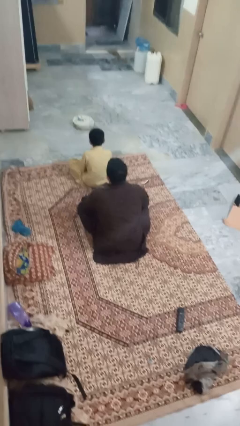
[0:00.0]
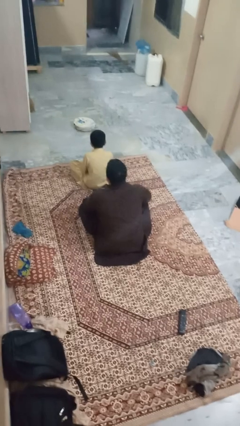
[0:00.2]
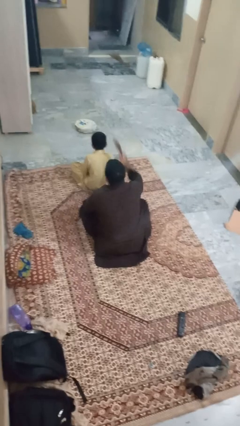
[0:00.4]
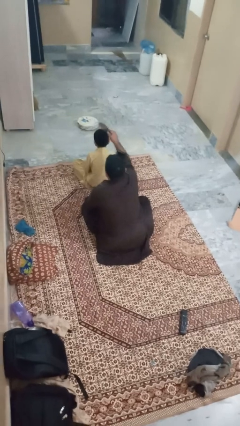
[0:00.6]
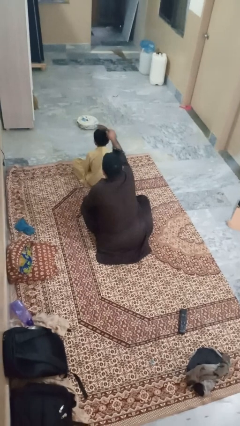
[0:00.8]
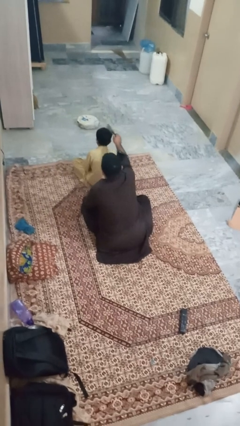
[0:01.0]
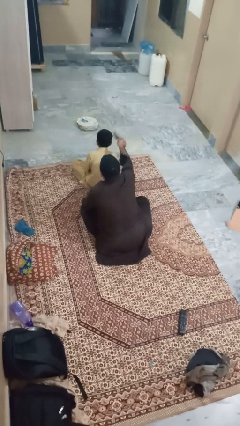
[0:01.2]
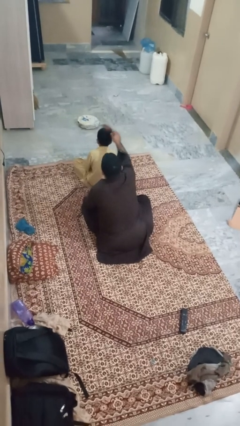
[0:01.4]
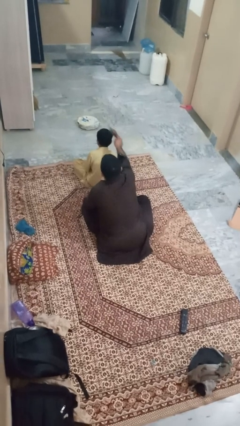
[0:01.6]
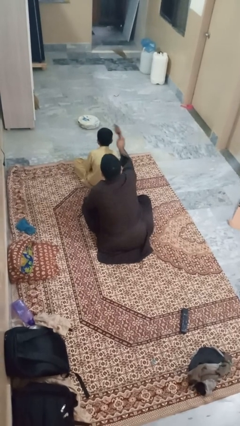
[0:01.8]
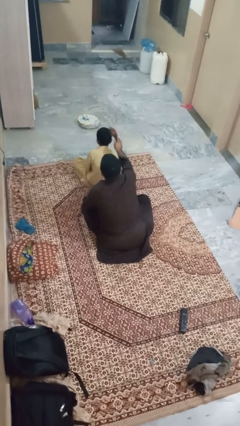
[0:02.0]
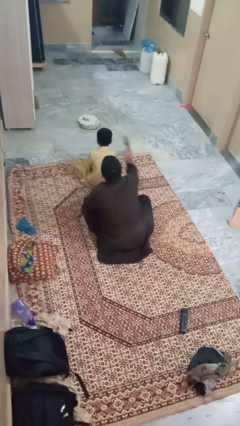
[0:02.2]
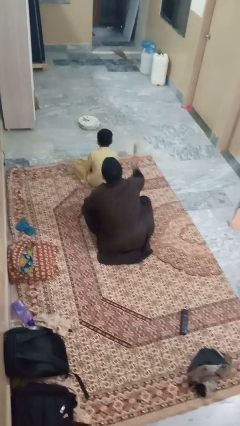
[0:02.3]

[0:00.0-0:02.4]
person brushes hair of person

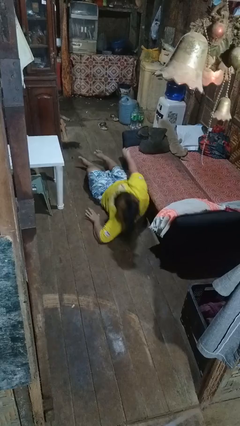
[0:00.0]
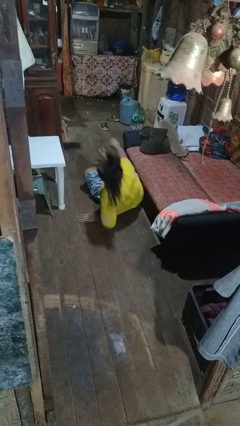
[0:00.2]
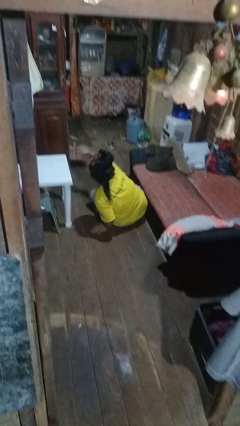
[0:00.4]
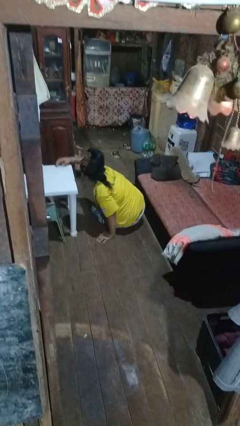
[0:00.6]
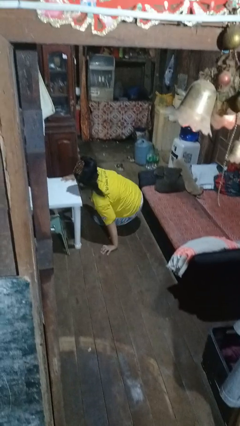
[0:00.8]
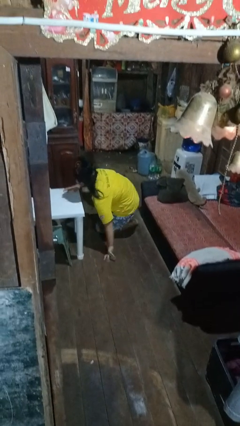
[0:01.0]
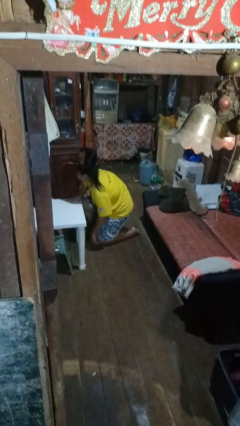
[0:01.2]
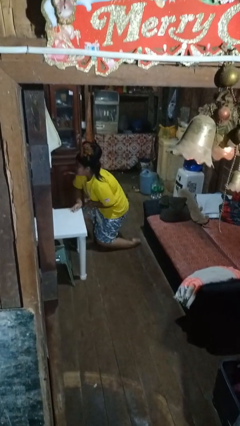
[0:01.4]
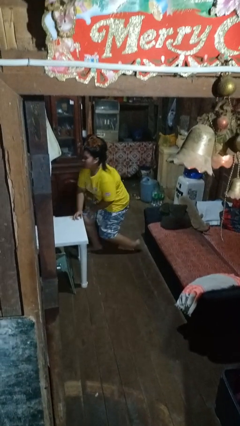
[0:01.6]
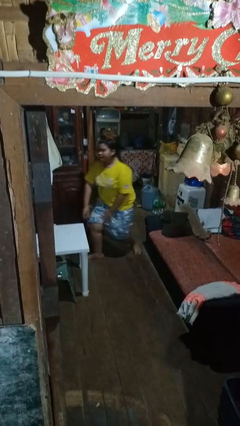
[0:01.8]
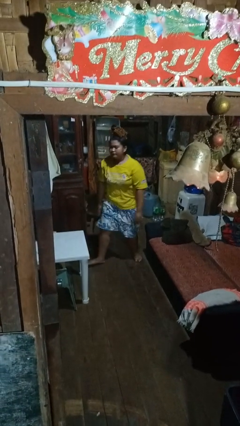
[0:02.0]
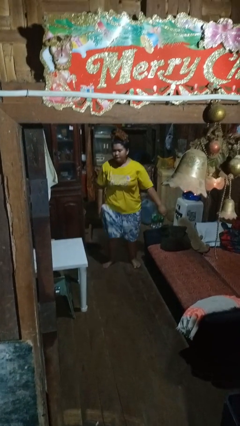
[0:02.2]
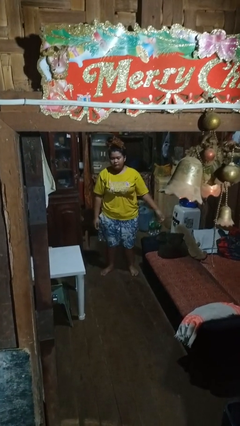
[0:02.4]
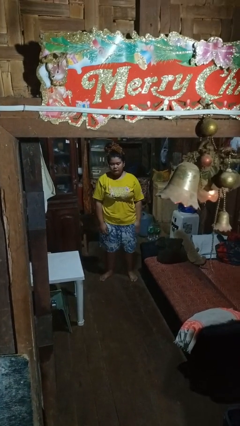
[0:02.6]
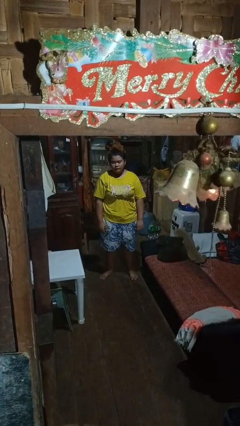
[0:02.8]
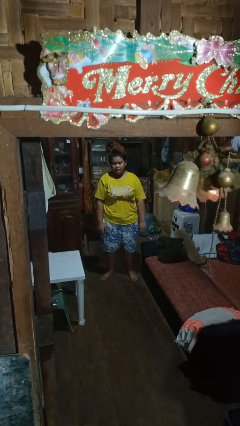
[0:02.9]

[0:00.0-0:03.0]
person stands up from floor

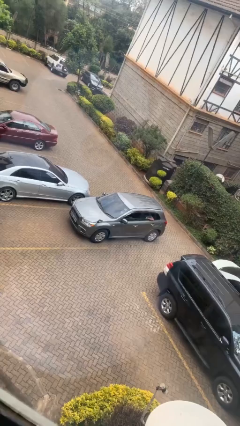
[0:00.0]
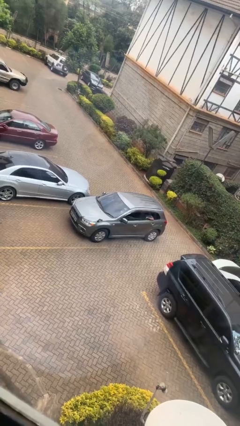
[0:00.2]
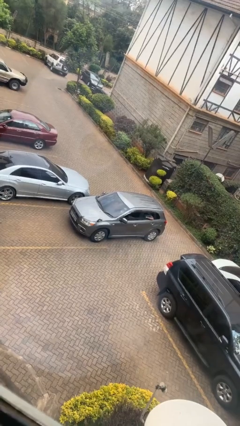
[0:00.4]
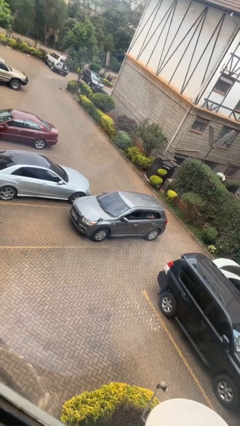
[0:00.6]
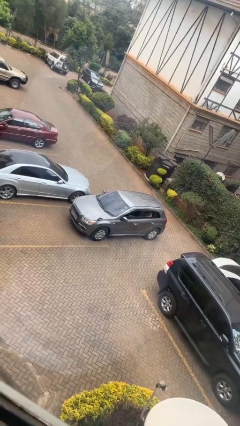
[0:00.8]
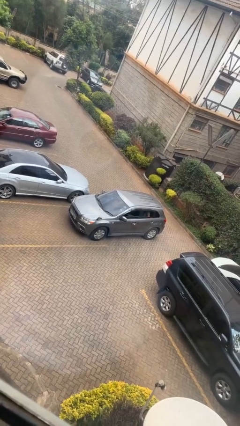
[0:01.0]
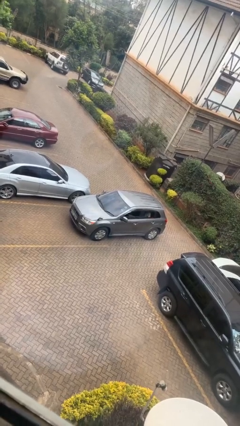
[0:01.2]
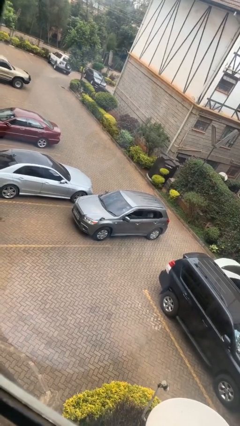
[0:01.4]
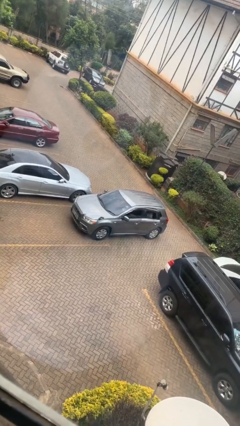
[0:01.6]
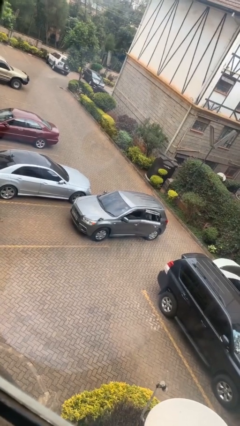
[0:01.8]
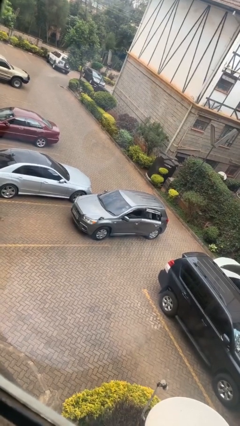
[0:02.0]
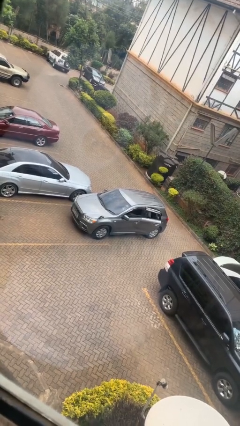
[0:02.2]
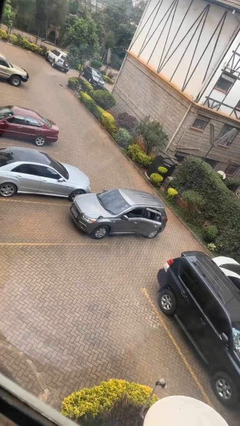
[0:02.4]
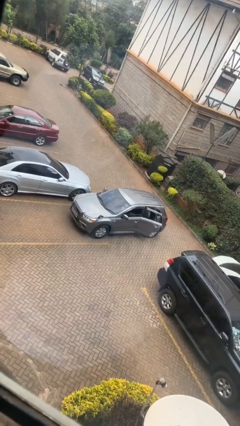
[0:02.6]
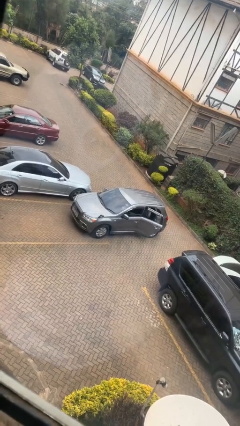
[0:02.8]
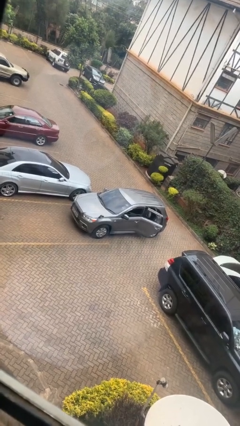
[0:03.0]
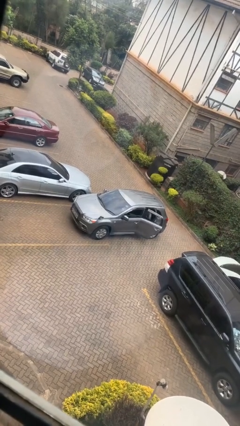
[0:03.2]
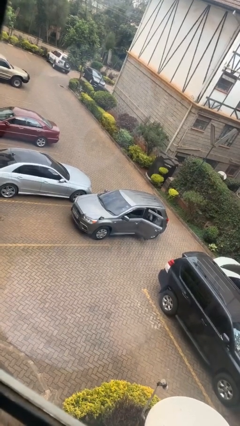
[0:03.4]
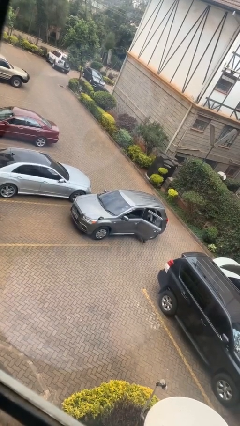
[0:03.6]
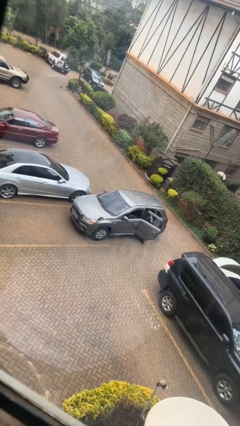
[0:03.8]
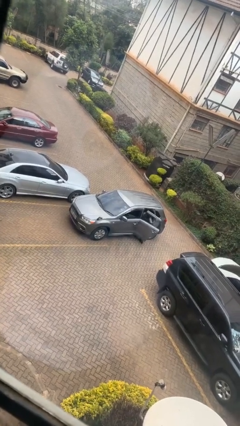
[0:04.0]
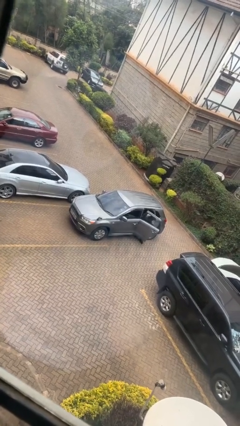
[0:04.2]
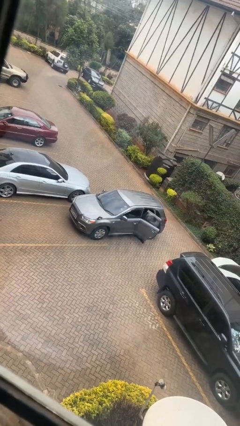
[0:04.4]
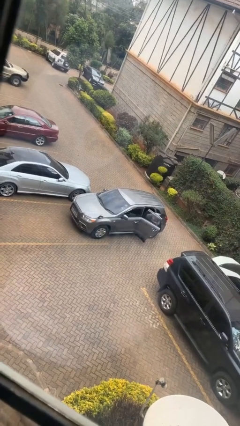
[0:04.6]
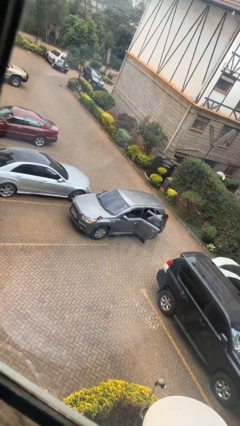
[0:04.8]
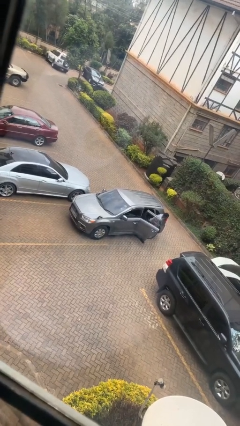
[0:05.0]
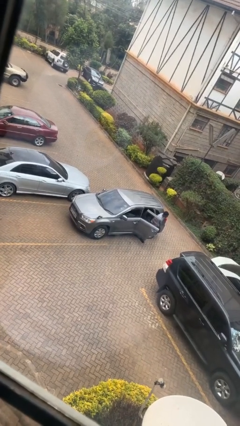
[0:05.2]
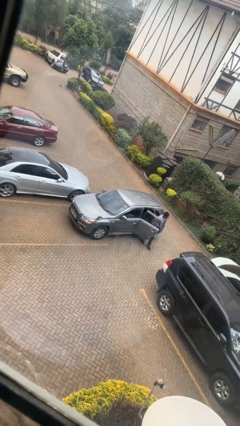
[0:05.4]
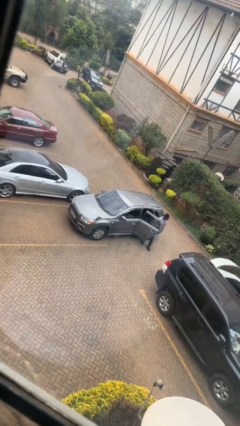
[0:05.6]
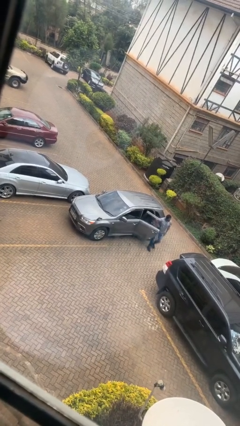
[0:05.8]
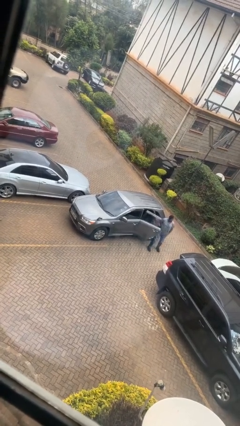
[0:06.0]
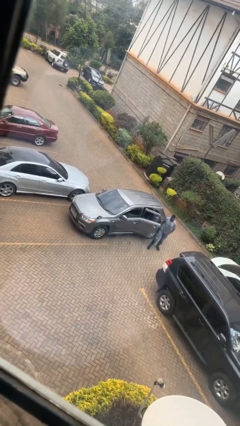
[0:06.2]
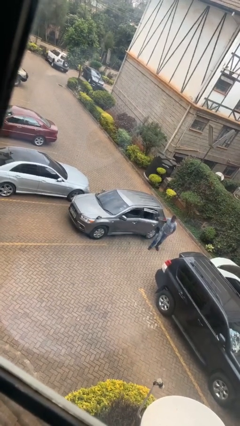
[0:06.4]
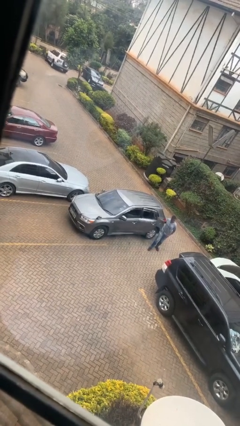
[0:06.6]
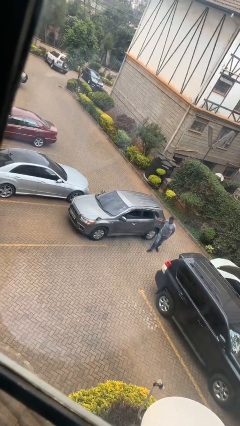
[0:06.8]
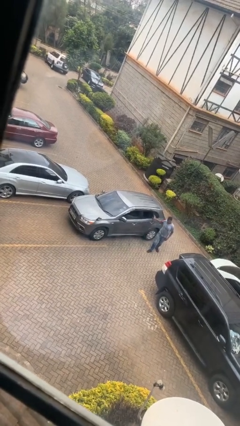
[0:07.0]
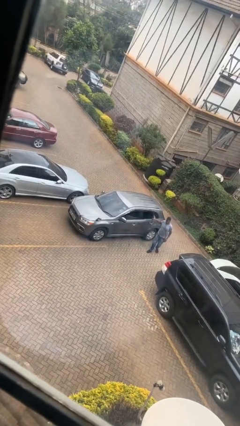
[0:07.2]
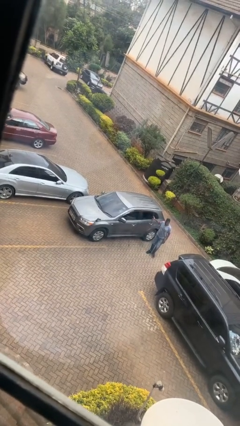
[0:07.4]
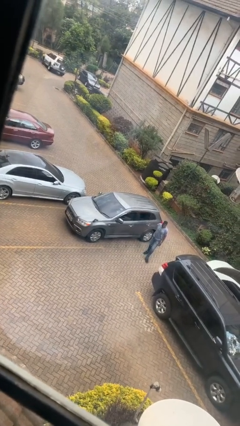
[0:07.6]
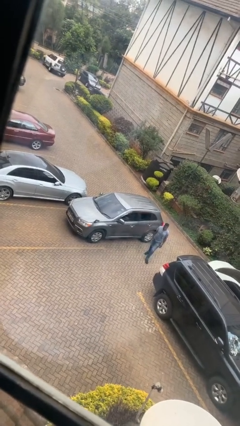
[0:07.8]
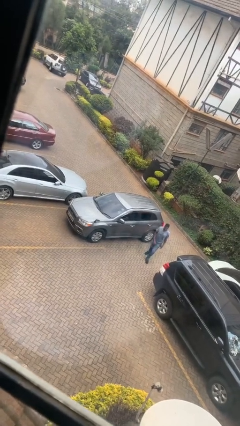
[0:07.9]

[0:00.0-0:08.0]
car drops off person

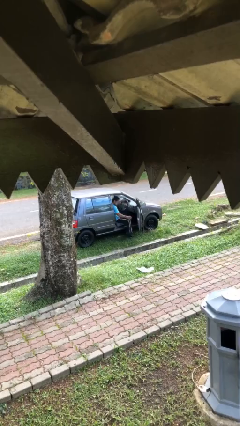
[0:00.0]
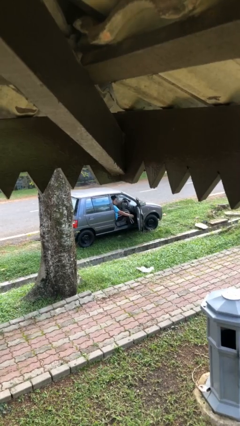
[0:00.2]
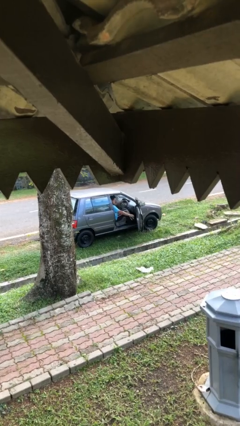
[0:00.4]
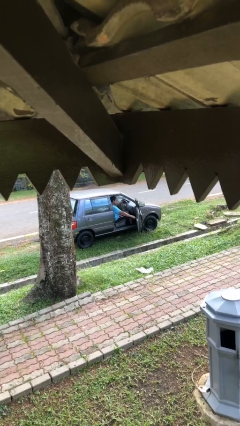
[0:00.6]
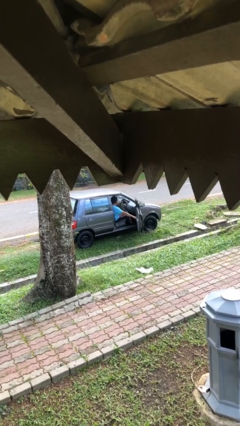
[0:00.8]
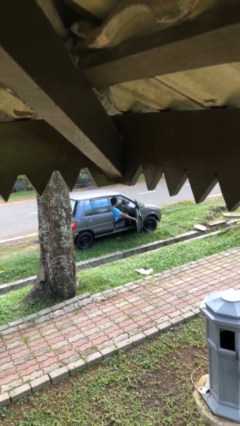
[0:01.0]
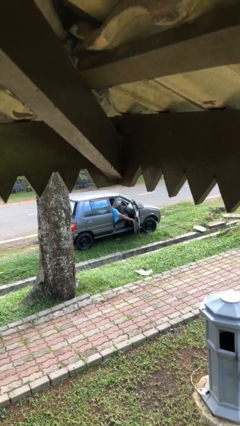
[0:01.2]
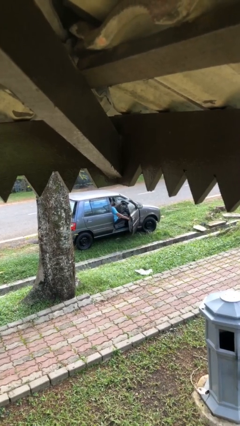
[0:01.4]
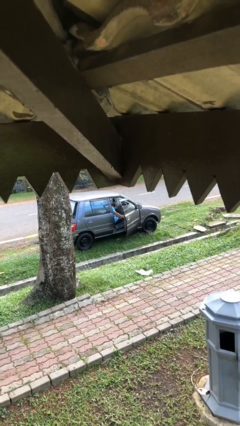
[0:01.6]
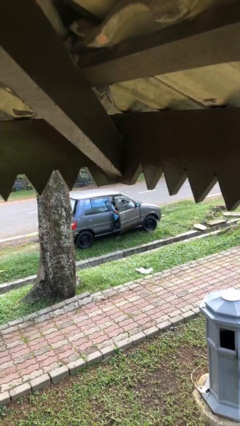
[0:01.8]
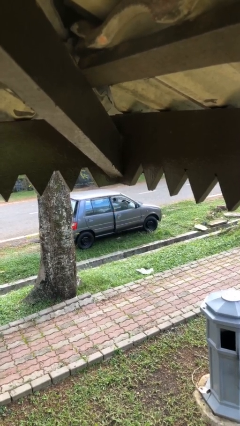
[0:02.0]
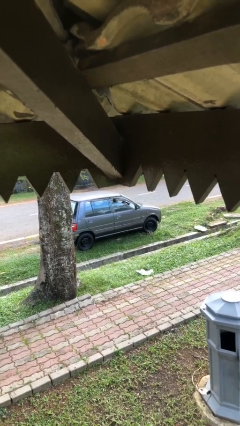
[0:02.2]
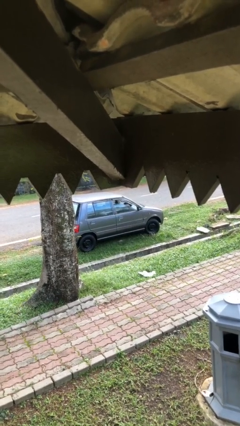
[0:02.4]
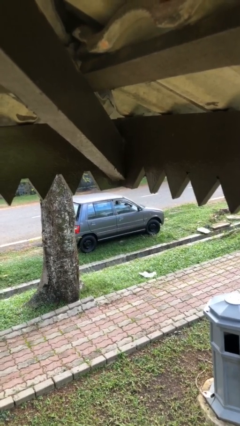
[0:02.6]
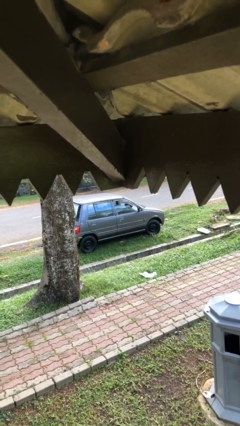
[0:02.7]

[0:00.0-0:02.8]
person closes car door

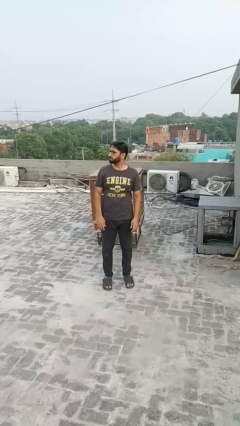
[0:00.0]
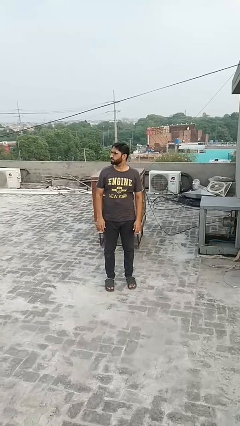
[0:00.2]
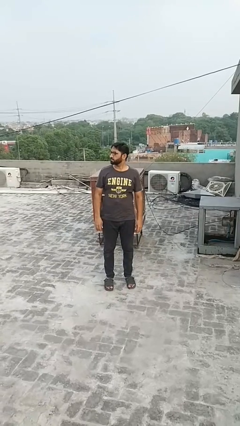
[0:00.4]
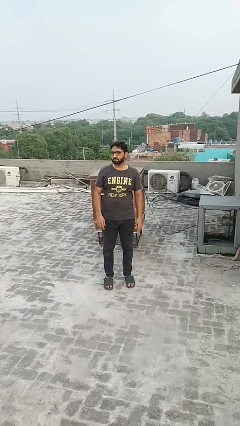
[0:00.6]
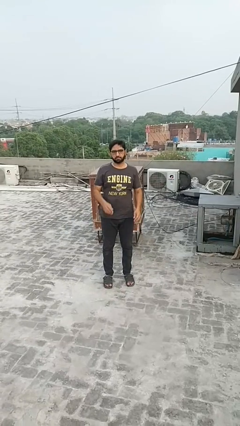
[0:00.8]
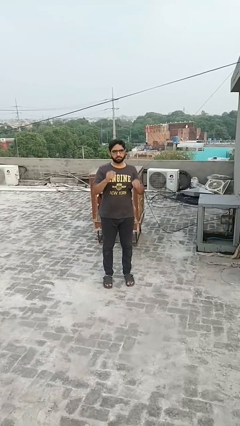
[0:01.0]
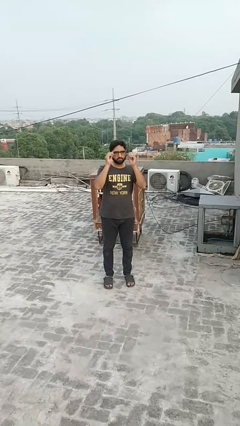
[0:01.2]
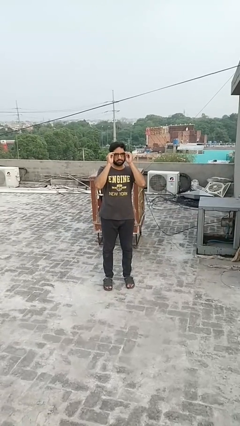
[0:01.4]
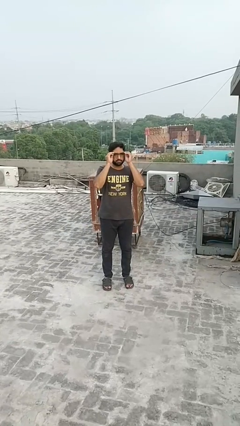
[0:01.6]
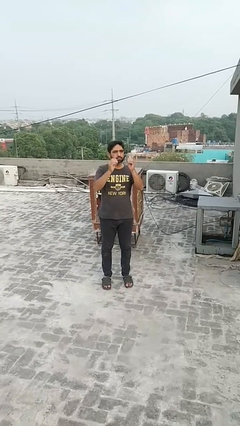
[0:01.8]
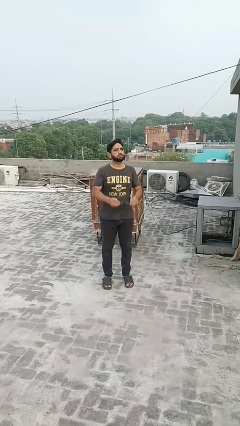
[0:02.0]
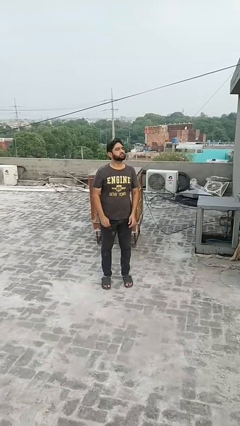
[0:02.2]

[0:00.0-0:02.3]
person takes off glasses
